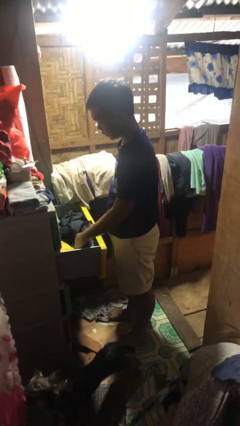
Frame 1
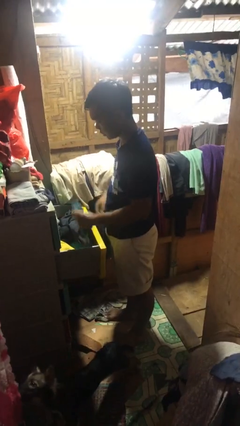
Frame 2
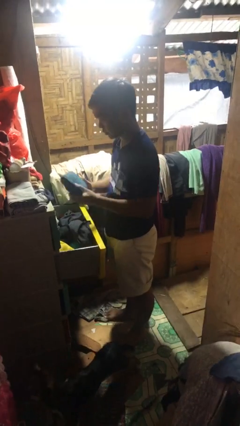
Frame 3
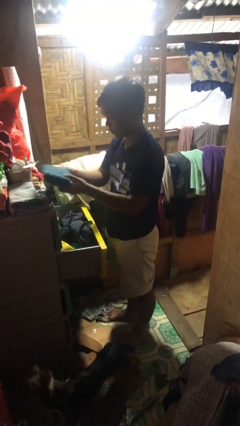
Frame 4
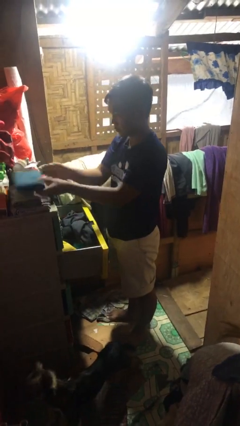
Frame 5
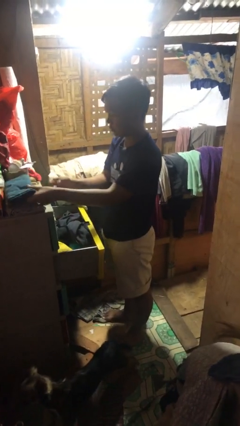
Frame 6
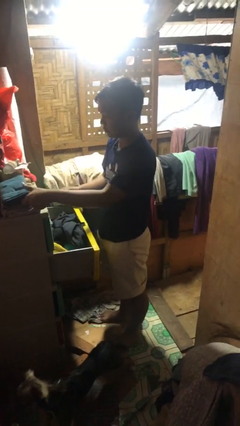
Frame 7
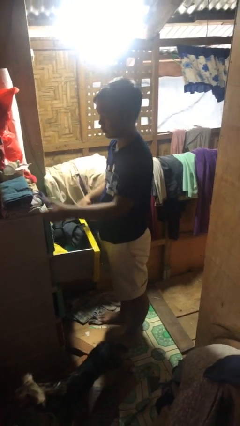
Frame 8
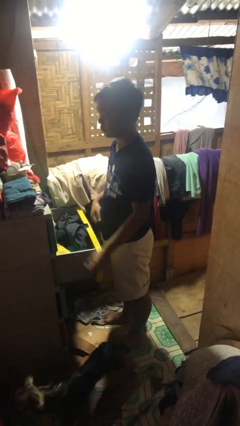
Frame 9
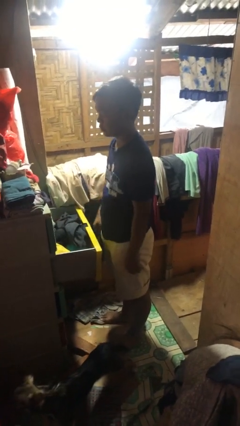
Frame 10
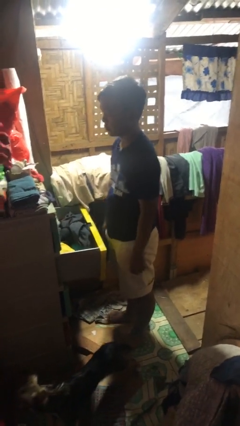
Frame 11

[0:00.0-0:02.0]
person takes clothes from dresser

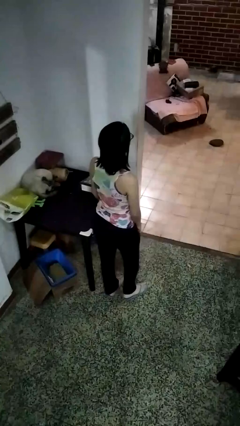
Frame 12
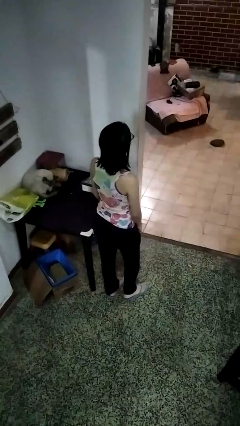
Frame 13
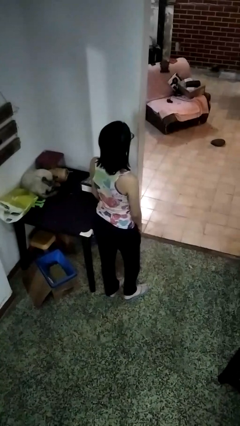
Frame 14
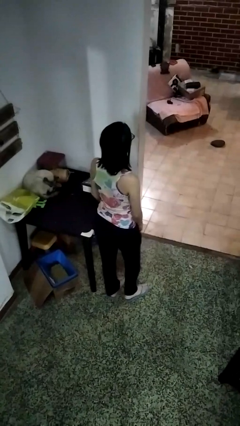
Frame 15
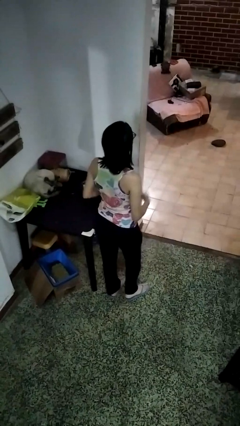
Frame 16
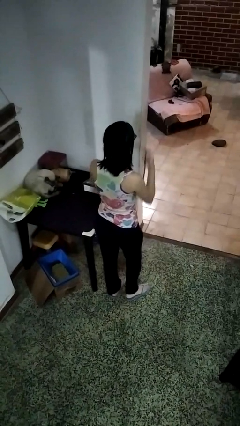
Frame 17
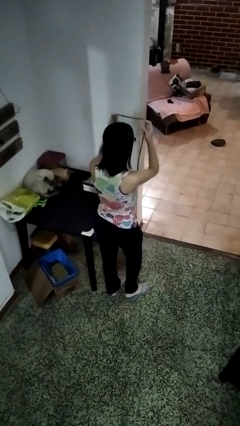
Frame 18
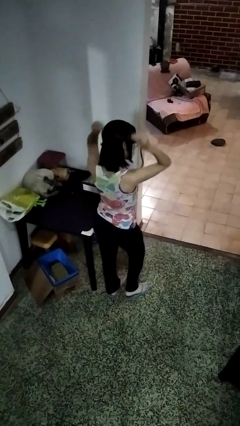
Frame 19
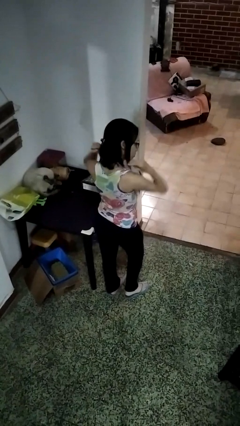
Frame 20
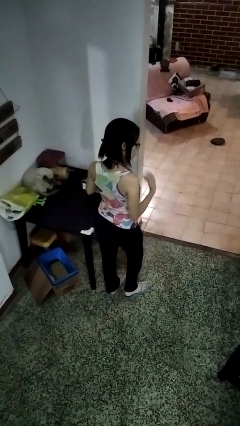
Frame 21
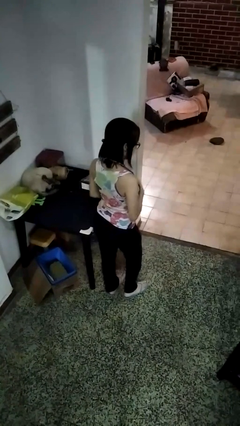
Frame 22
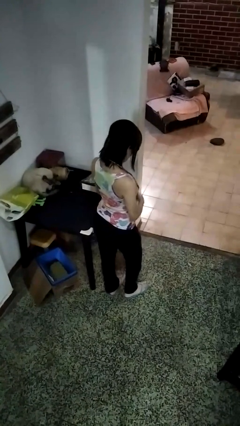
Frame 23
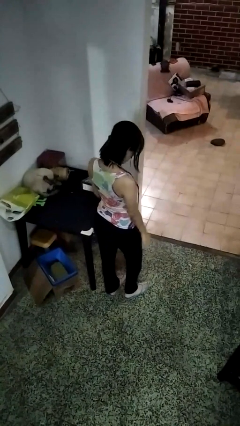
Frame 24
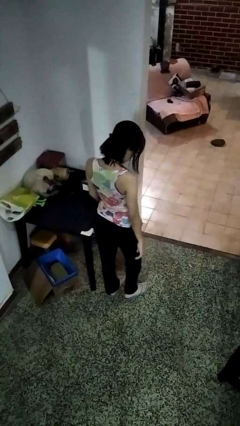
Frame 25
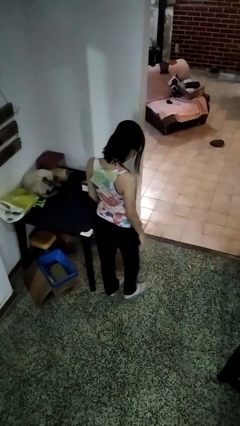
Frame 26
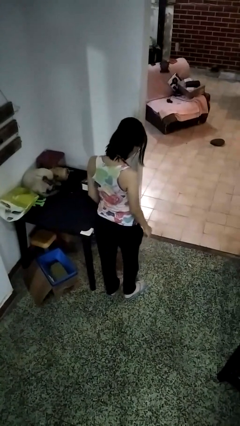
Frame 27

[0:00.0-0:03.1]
person puts on necklace

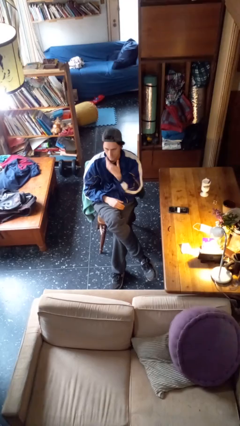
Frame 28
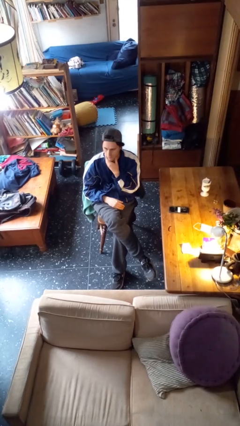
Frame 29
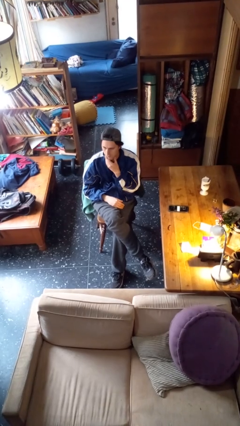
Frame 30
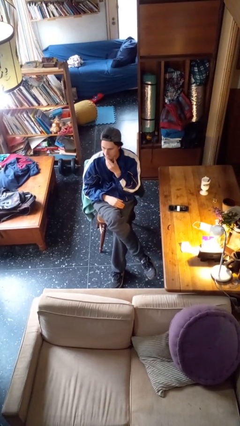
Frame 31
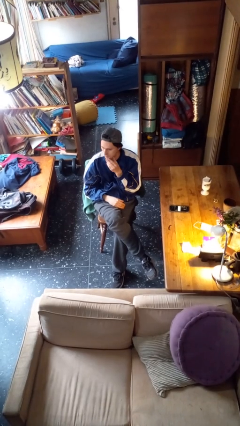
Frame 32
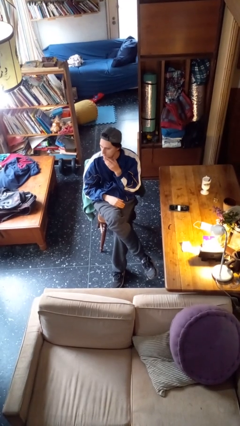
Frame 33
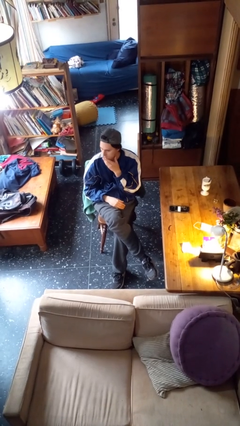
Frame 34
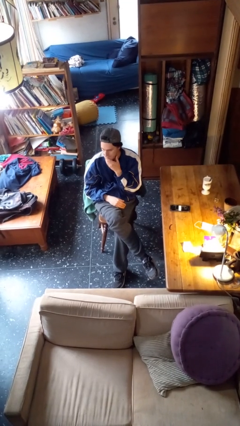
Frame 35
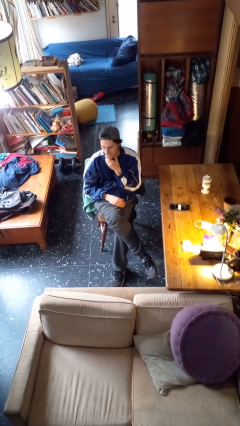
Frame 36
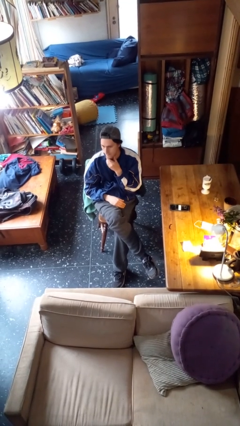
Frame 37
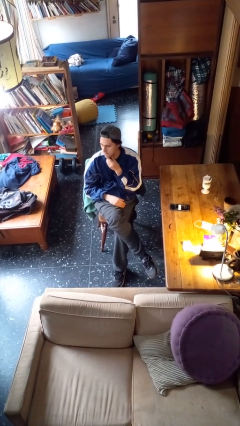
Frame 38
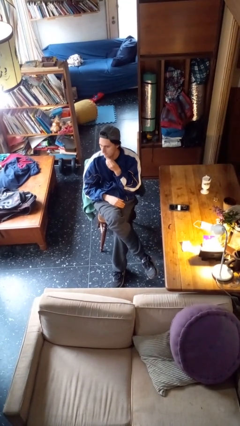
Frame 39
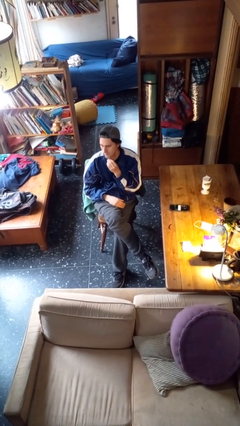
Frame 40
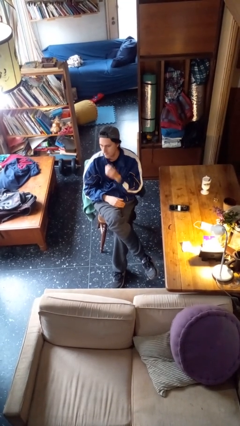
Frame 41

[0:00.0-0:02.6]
person strokes chin

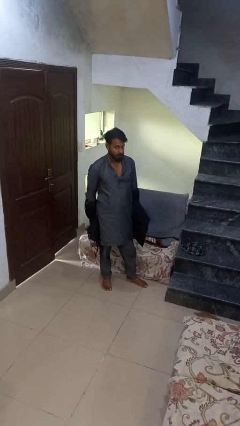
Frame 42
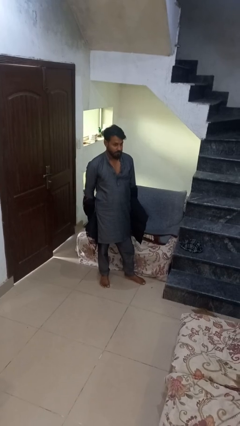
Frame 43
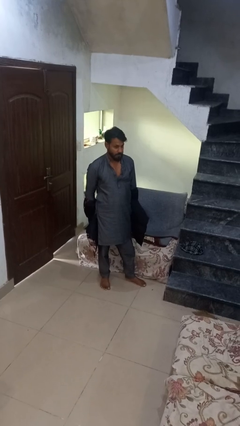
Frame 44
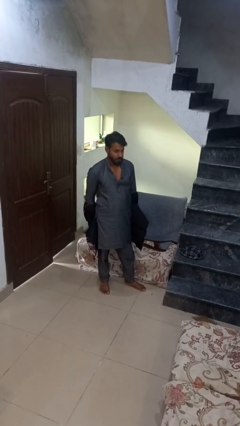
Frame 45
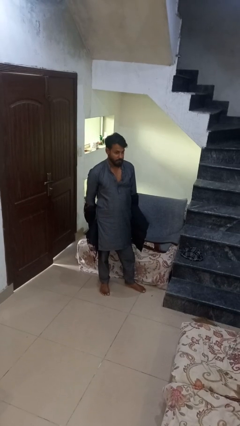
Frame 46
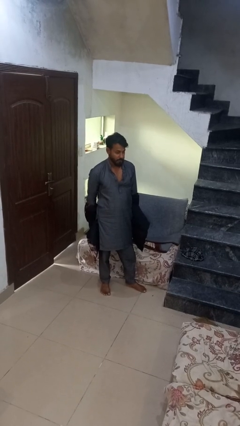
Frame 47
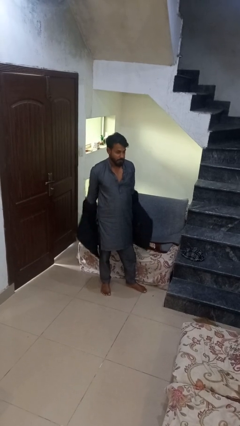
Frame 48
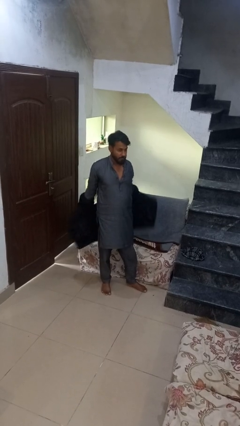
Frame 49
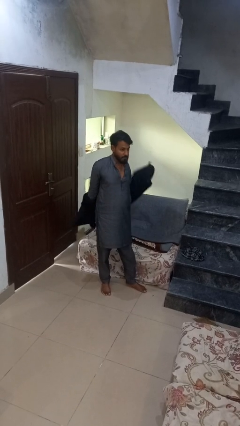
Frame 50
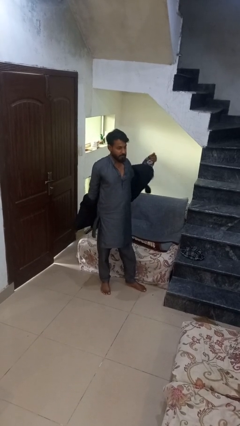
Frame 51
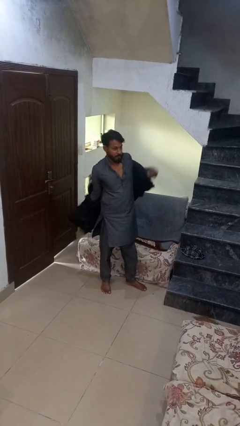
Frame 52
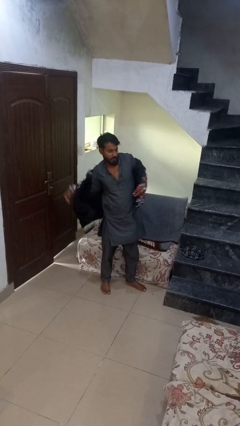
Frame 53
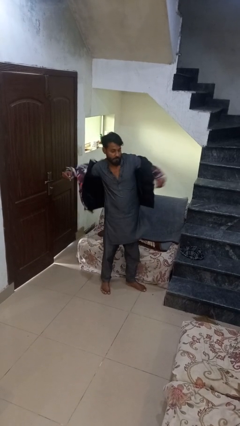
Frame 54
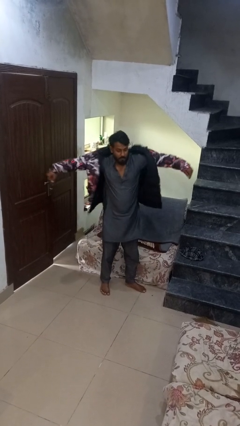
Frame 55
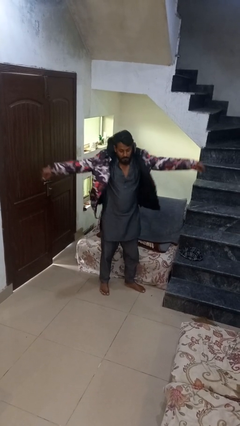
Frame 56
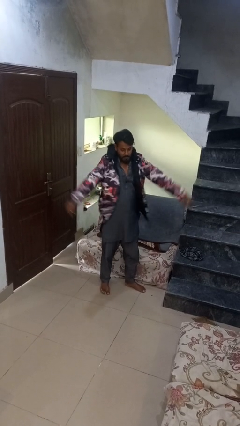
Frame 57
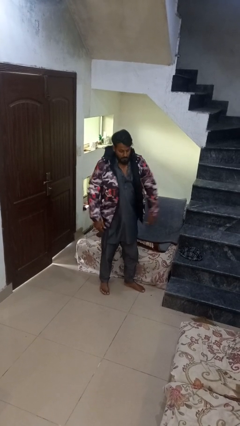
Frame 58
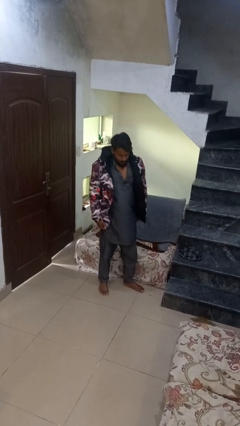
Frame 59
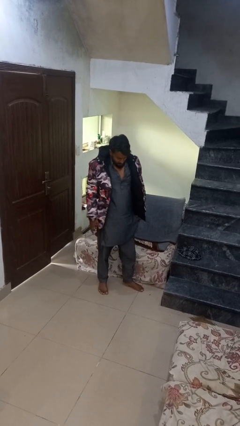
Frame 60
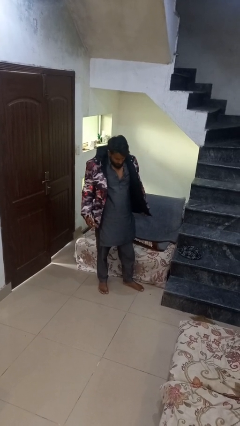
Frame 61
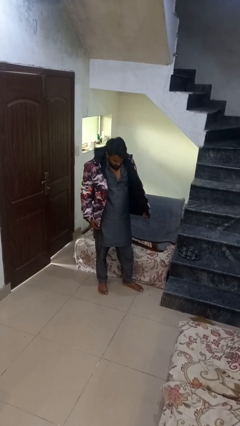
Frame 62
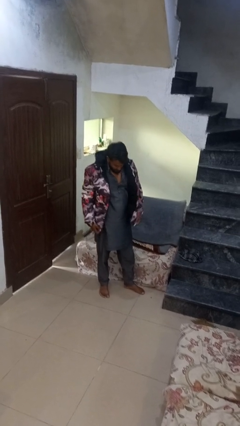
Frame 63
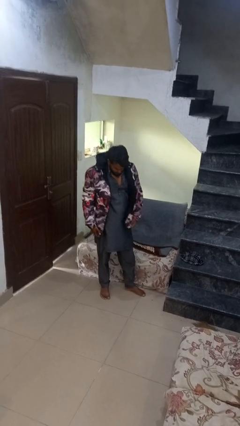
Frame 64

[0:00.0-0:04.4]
person puts on jacket

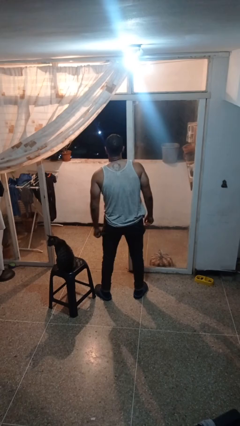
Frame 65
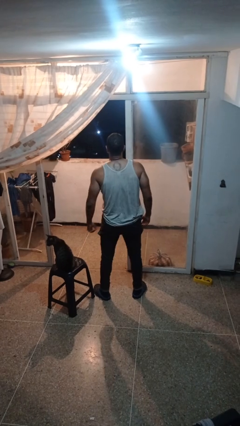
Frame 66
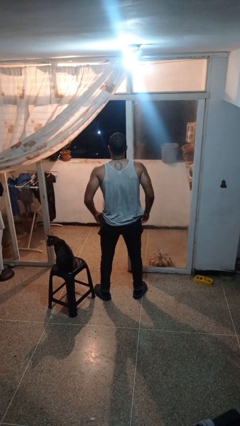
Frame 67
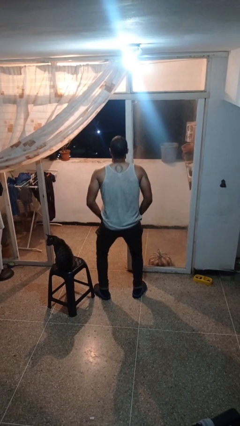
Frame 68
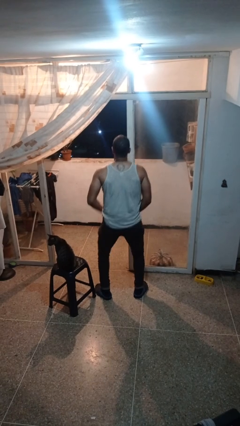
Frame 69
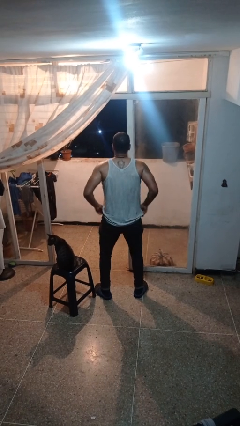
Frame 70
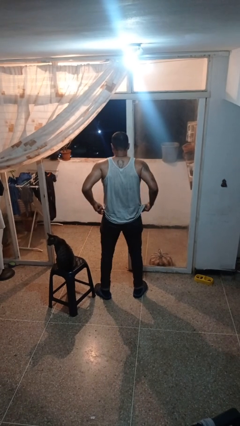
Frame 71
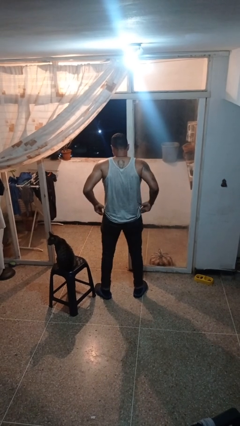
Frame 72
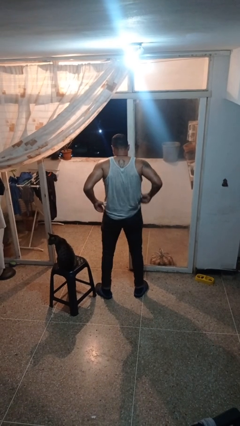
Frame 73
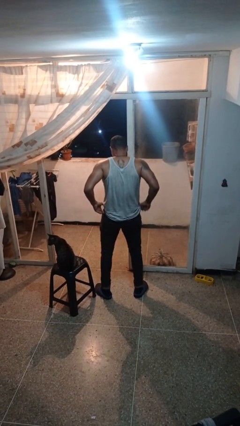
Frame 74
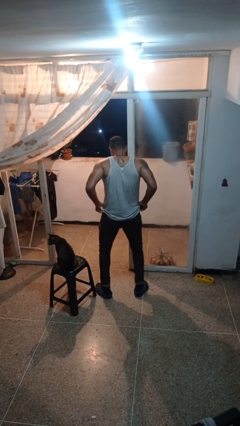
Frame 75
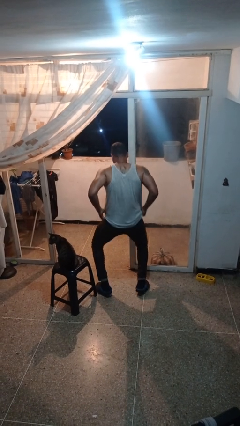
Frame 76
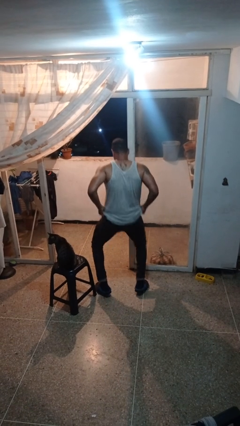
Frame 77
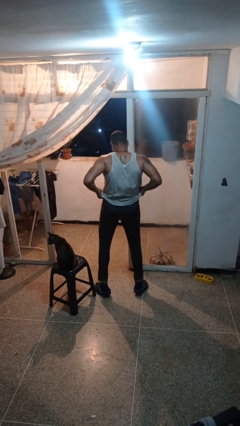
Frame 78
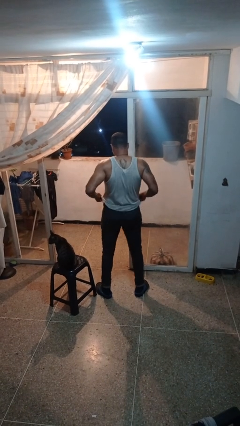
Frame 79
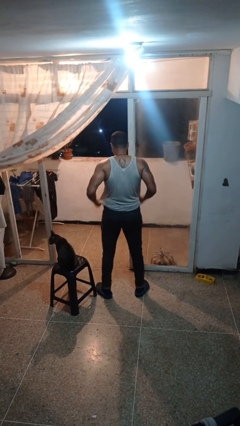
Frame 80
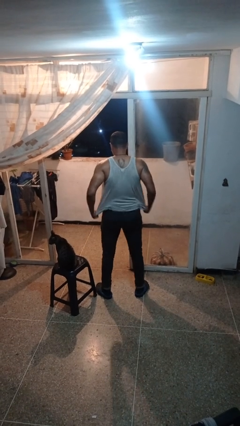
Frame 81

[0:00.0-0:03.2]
person hikes up pants

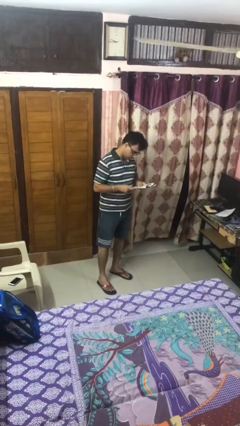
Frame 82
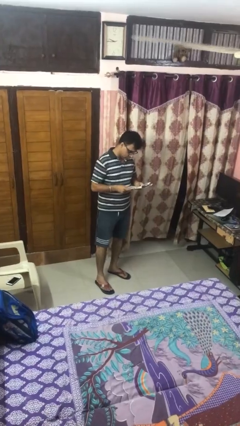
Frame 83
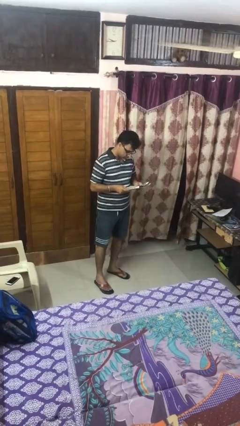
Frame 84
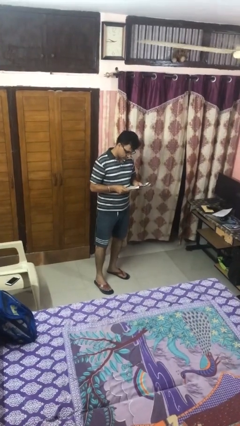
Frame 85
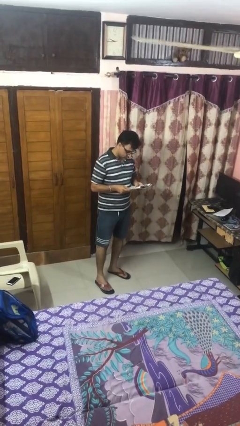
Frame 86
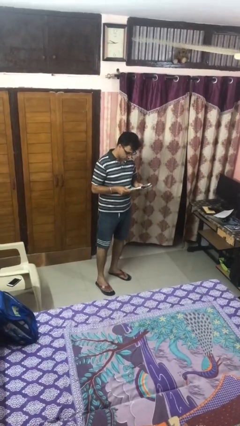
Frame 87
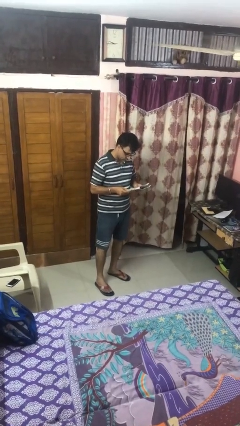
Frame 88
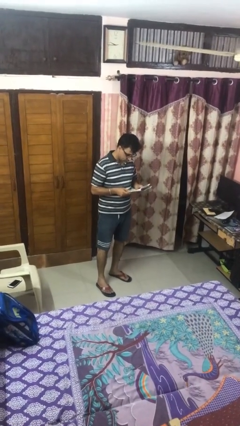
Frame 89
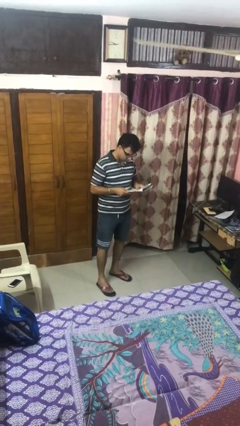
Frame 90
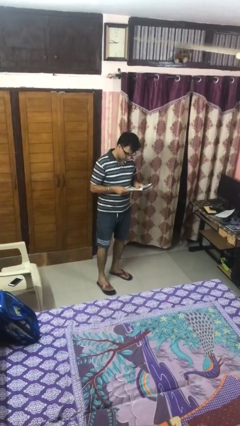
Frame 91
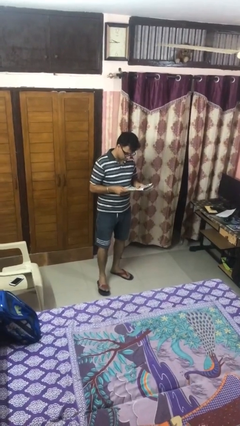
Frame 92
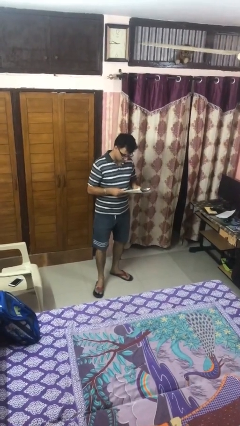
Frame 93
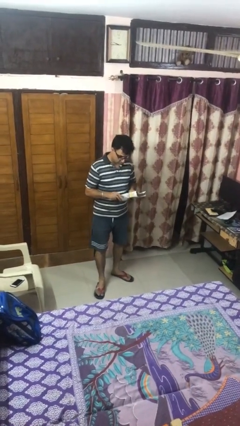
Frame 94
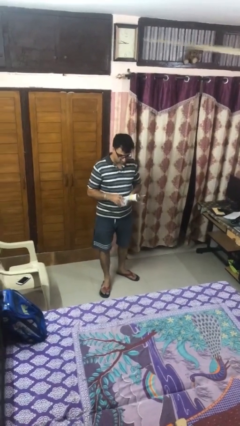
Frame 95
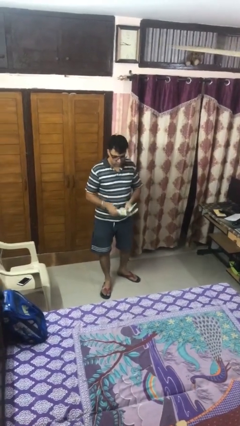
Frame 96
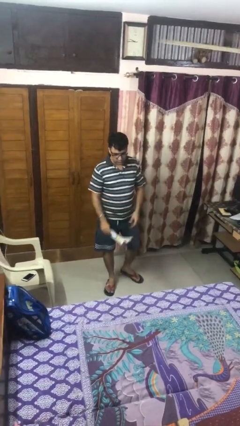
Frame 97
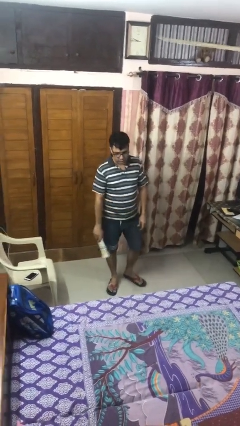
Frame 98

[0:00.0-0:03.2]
person reads newspaper
